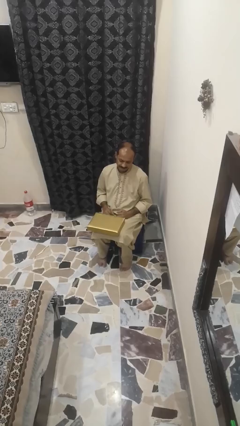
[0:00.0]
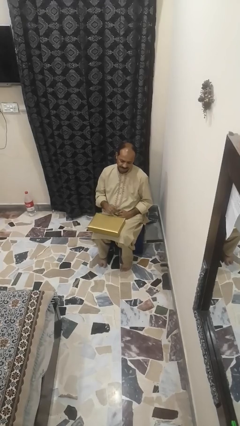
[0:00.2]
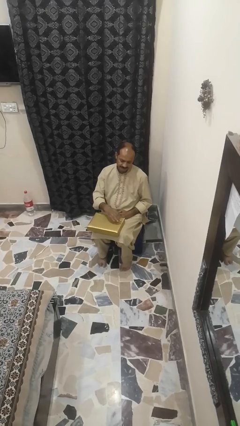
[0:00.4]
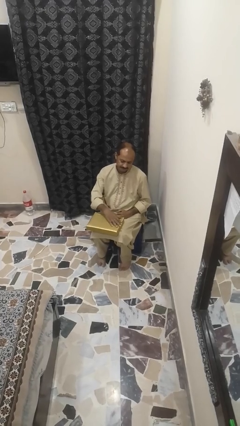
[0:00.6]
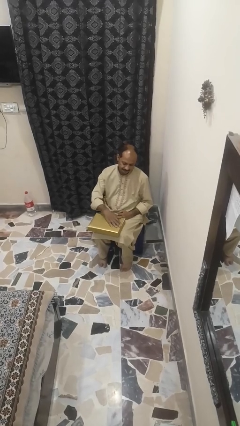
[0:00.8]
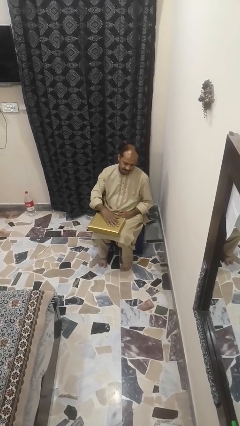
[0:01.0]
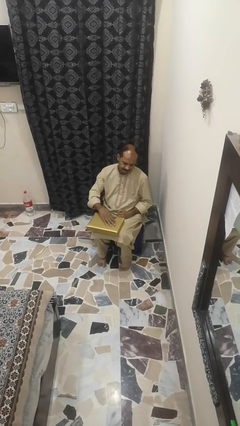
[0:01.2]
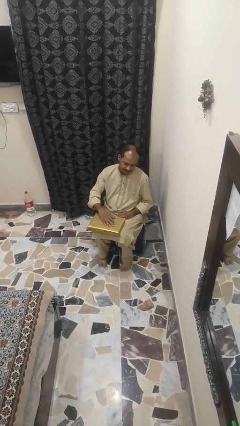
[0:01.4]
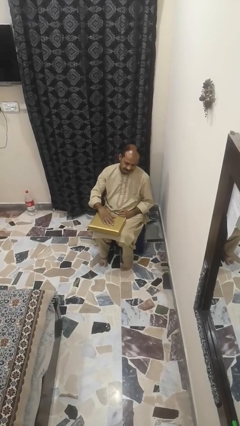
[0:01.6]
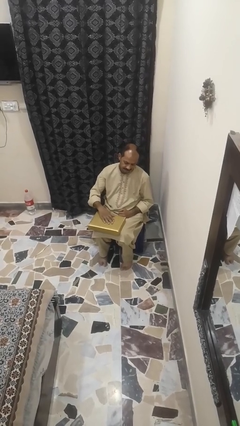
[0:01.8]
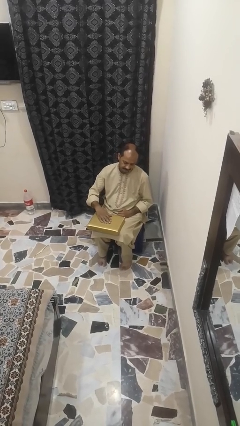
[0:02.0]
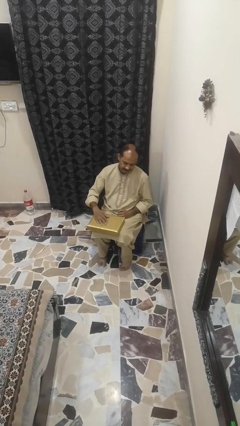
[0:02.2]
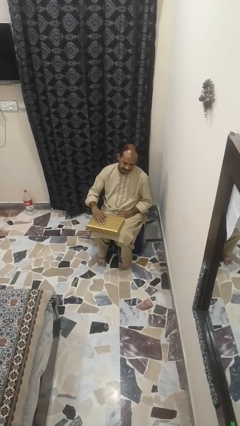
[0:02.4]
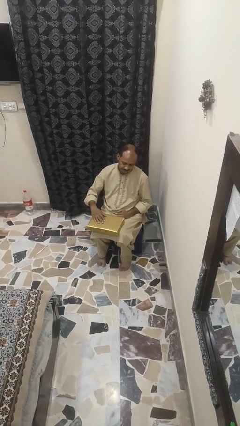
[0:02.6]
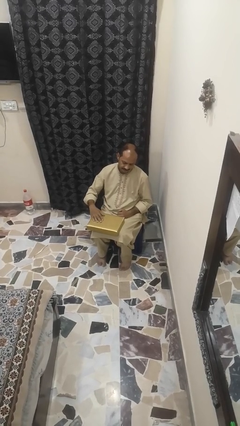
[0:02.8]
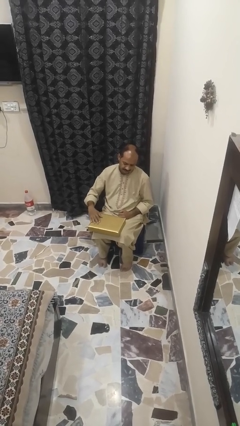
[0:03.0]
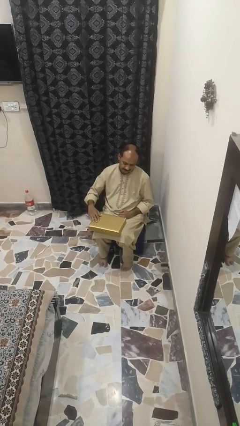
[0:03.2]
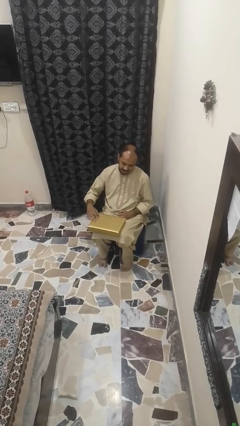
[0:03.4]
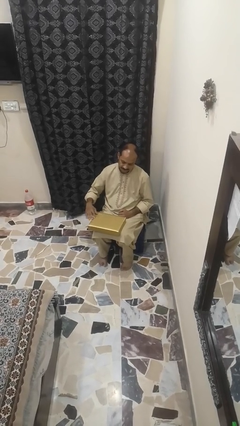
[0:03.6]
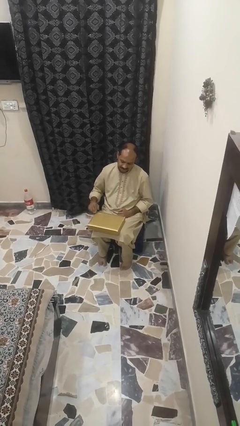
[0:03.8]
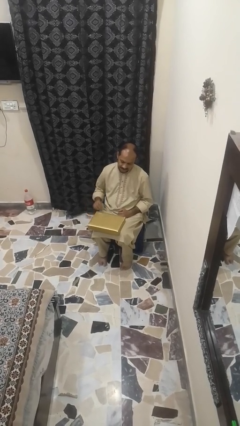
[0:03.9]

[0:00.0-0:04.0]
person waves hand over object

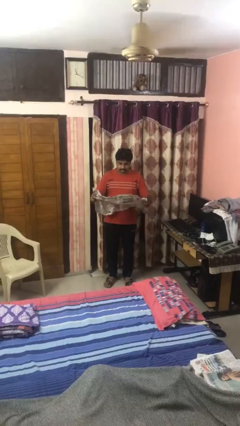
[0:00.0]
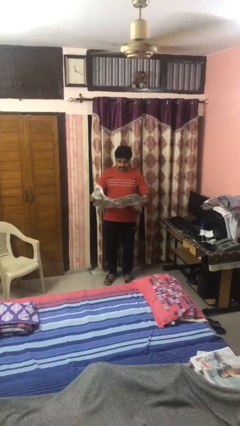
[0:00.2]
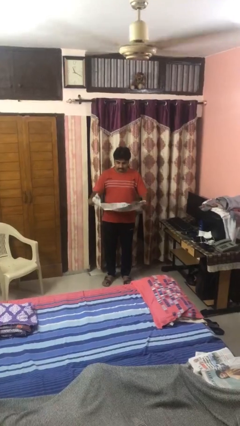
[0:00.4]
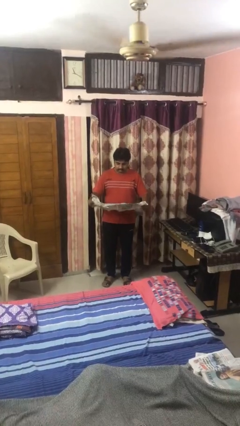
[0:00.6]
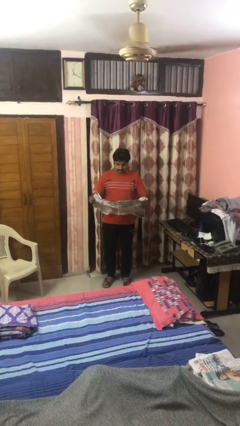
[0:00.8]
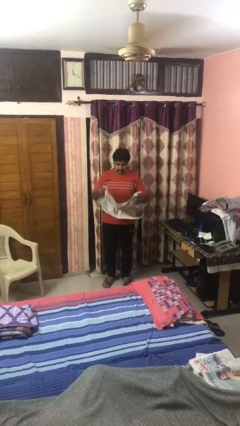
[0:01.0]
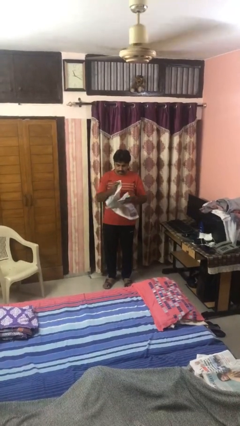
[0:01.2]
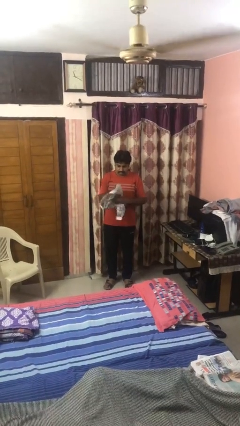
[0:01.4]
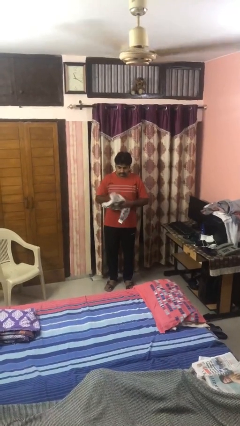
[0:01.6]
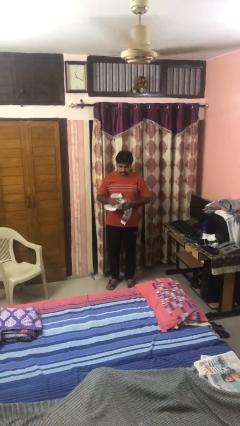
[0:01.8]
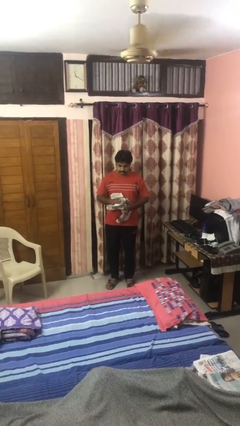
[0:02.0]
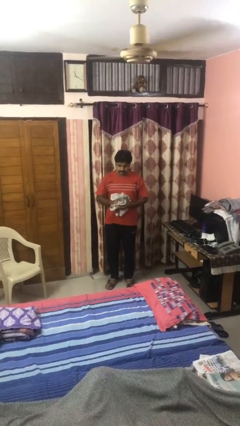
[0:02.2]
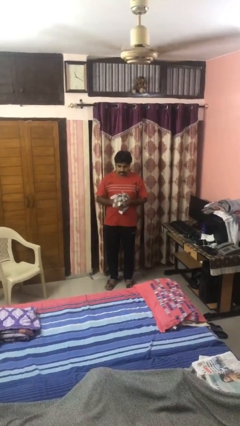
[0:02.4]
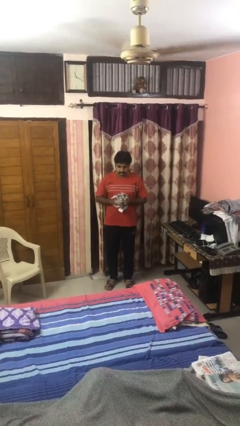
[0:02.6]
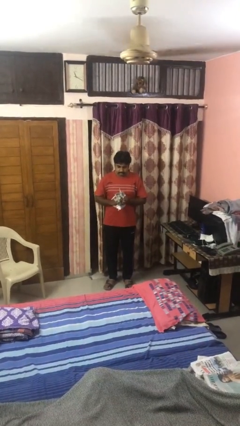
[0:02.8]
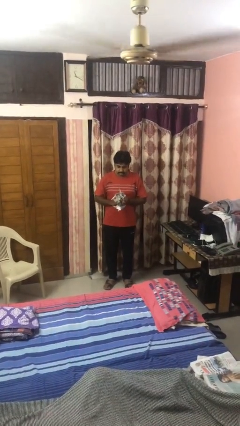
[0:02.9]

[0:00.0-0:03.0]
person crumples paper

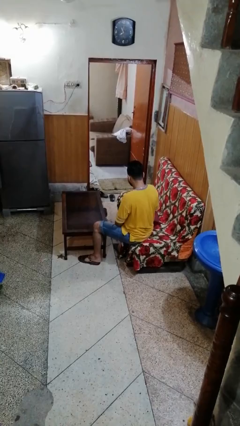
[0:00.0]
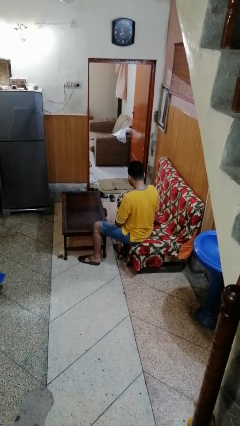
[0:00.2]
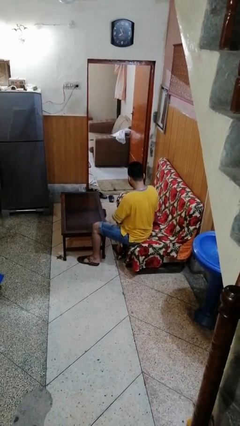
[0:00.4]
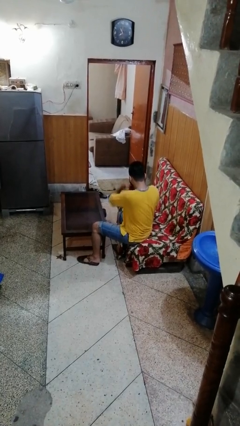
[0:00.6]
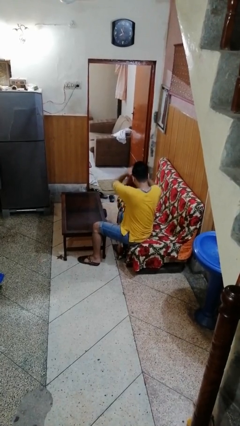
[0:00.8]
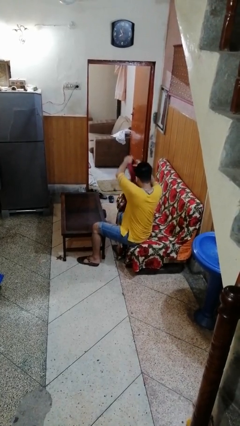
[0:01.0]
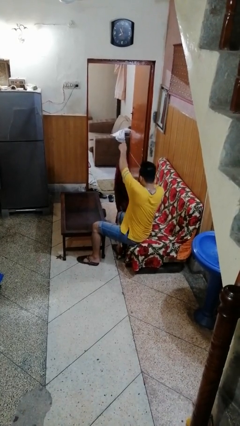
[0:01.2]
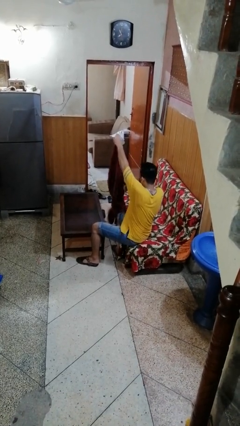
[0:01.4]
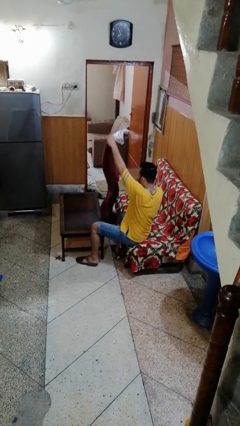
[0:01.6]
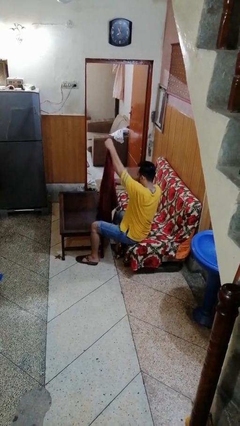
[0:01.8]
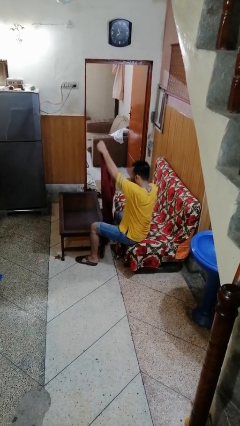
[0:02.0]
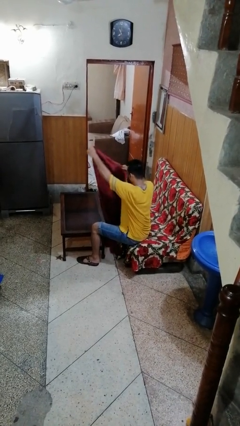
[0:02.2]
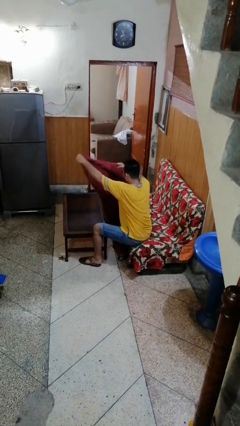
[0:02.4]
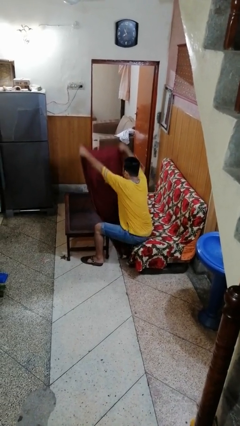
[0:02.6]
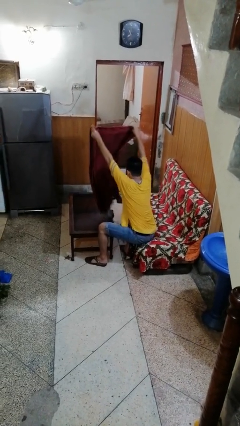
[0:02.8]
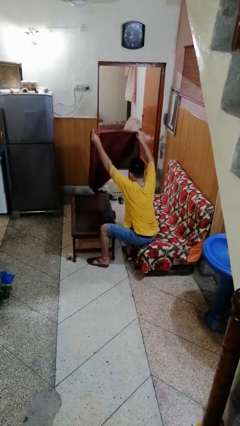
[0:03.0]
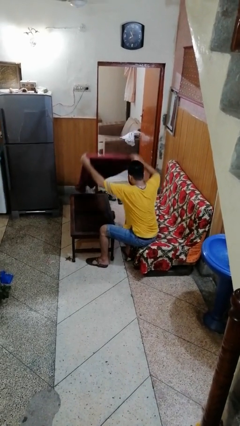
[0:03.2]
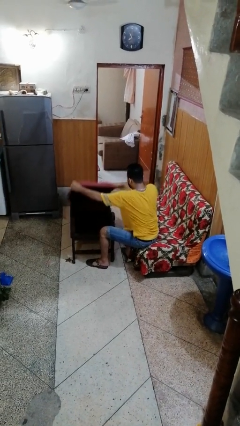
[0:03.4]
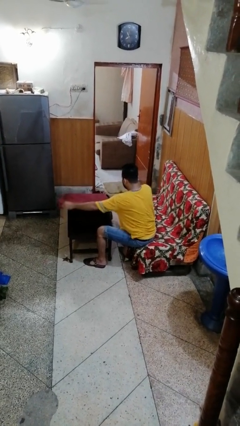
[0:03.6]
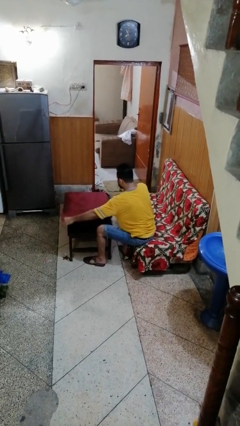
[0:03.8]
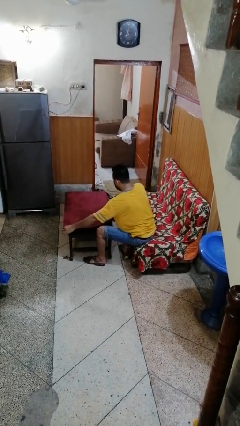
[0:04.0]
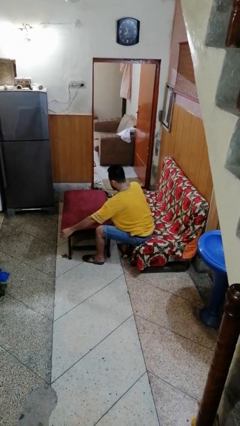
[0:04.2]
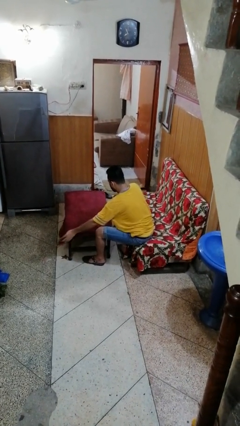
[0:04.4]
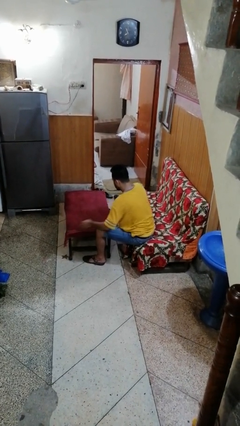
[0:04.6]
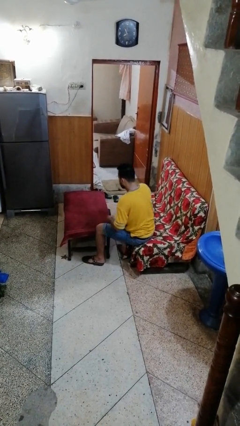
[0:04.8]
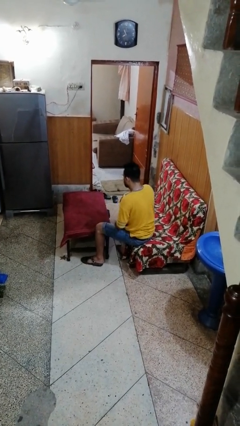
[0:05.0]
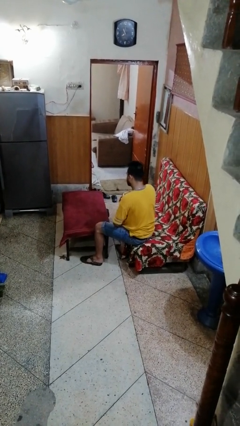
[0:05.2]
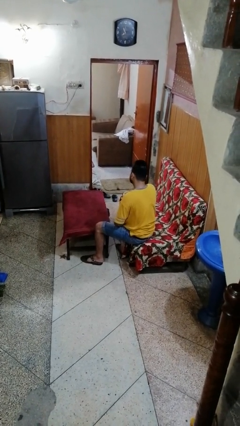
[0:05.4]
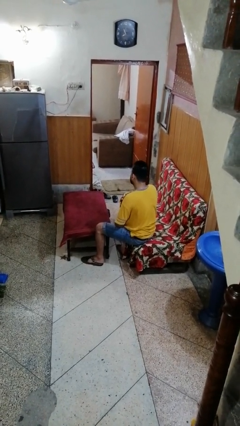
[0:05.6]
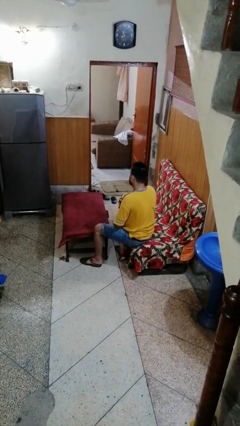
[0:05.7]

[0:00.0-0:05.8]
person spreads tablecloth

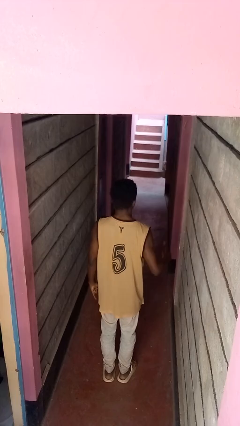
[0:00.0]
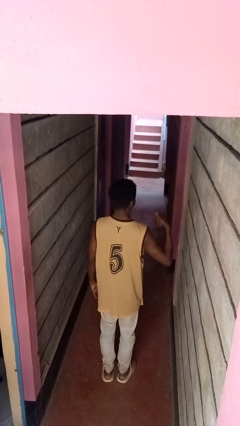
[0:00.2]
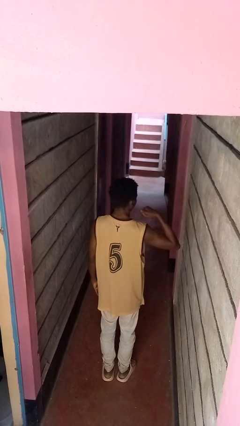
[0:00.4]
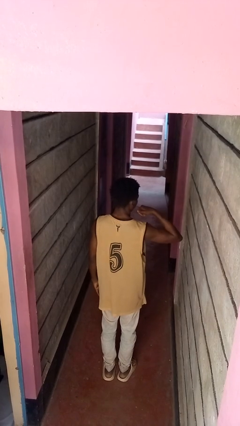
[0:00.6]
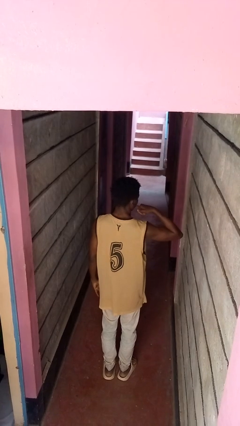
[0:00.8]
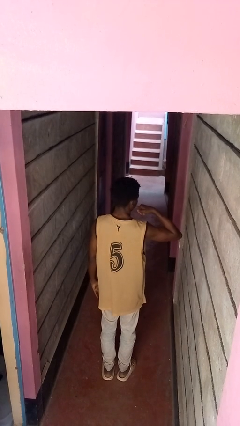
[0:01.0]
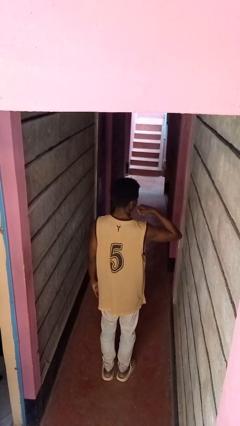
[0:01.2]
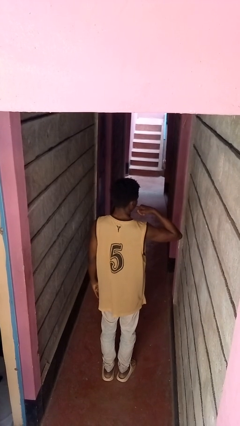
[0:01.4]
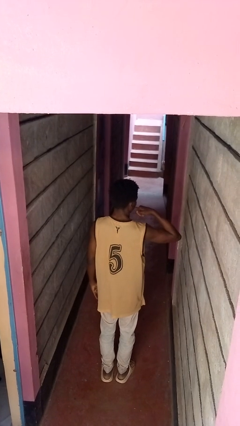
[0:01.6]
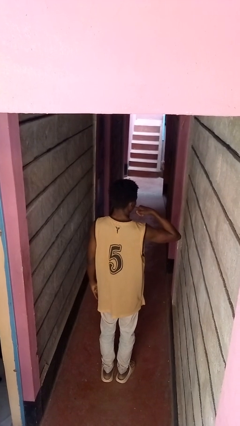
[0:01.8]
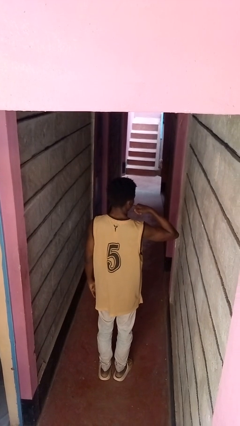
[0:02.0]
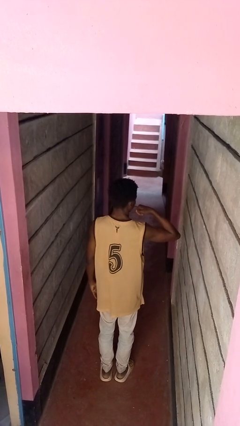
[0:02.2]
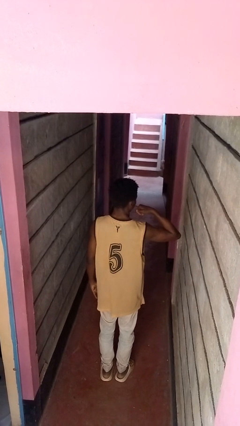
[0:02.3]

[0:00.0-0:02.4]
person gestures call me

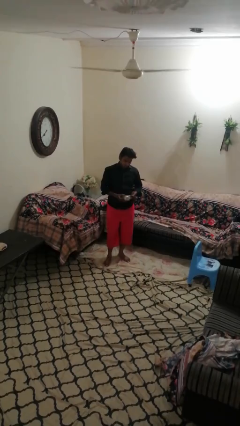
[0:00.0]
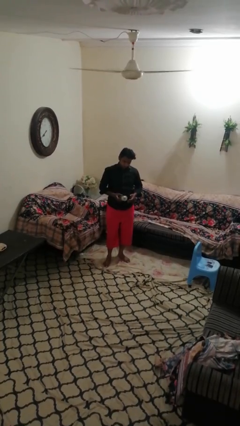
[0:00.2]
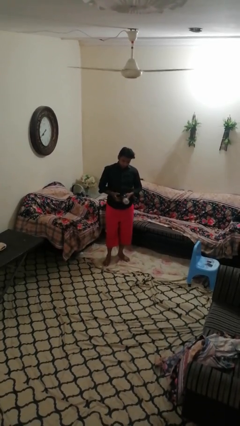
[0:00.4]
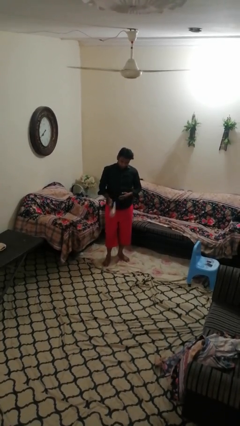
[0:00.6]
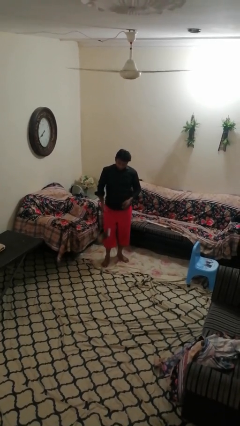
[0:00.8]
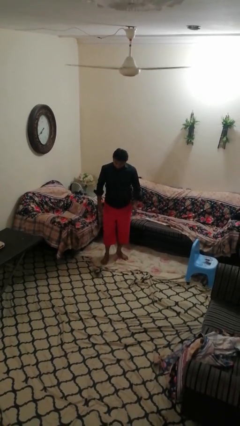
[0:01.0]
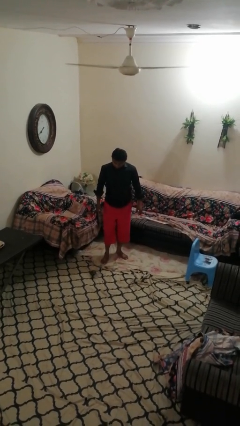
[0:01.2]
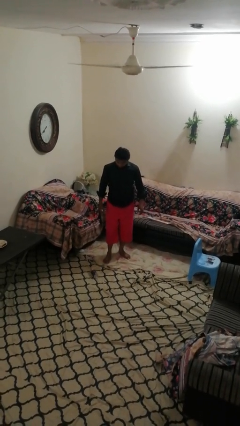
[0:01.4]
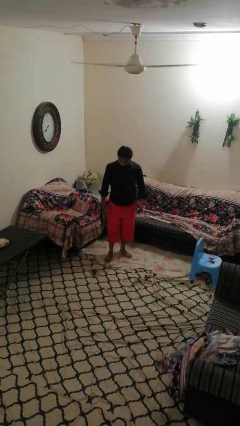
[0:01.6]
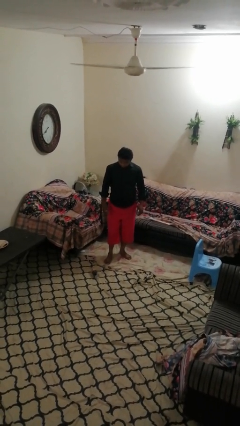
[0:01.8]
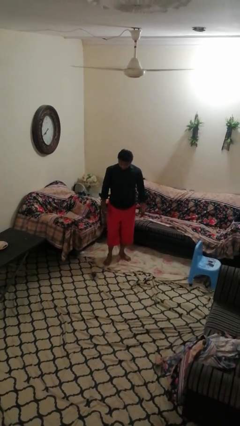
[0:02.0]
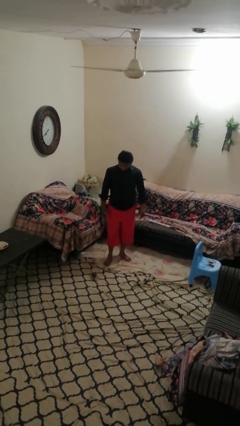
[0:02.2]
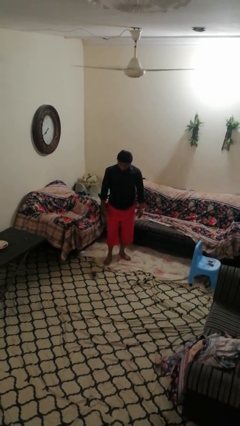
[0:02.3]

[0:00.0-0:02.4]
person drops object
